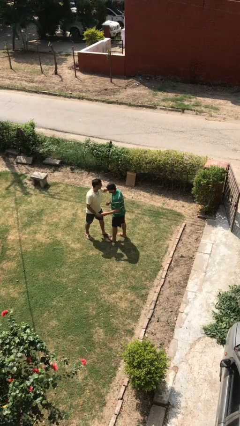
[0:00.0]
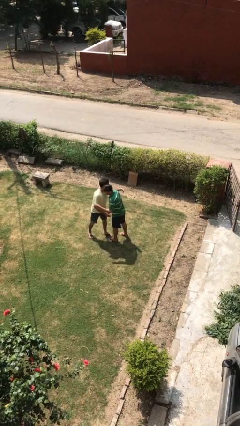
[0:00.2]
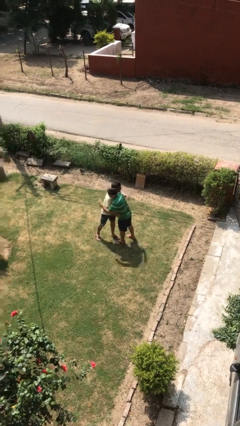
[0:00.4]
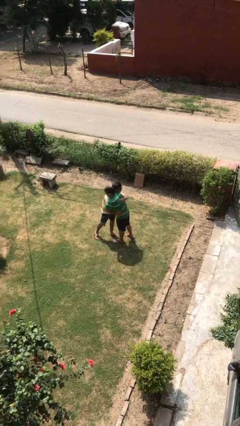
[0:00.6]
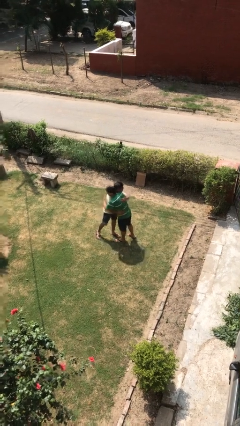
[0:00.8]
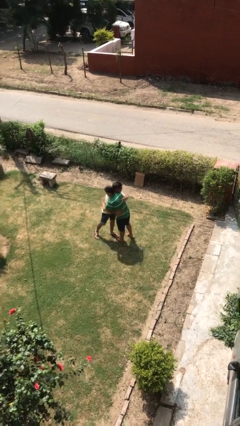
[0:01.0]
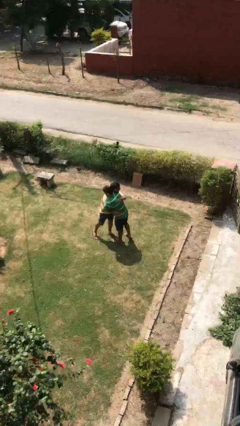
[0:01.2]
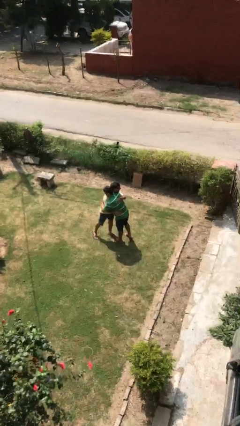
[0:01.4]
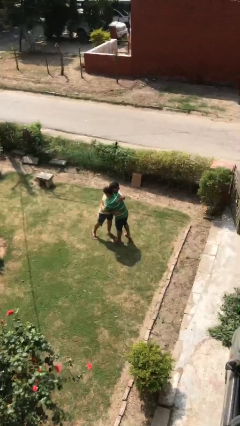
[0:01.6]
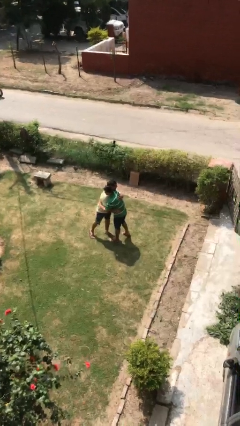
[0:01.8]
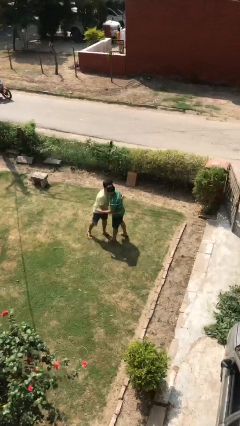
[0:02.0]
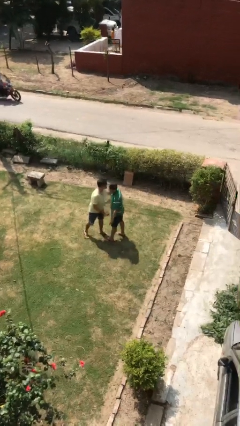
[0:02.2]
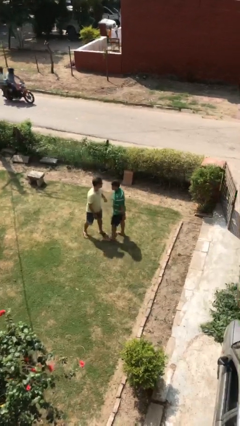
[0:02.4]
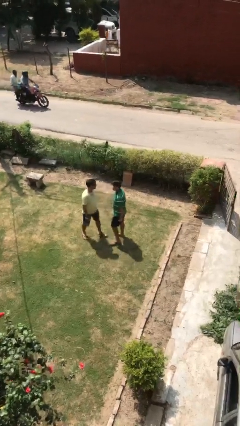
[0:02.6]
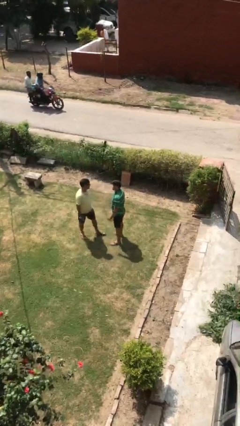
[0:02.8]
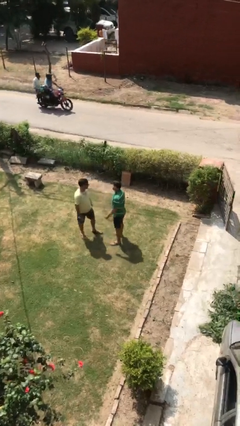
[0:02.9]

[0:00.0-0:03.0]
person embraces person

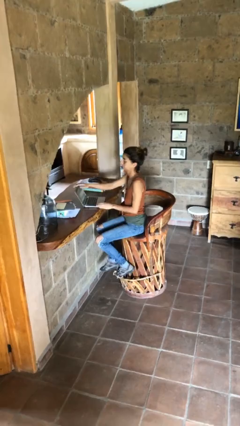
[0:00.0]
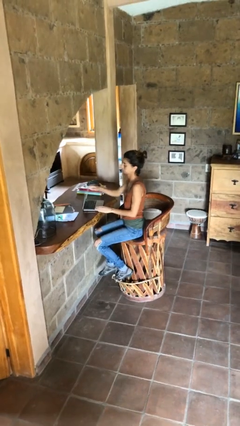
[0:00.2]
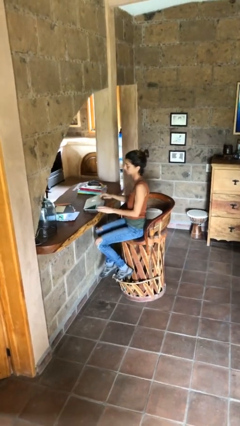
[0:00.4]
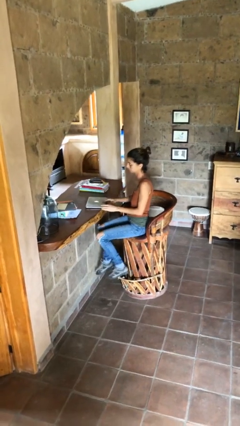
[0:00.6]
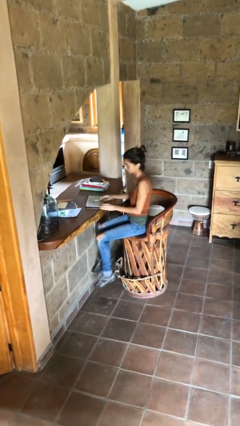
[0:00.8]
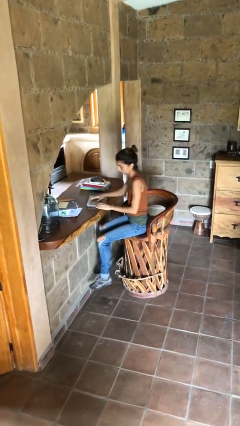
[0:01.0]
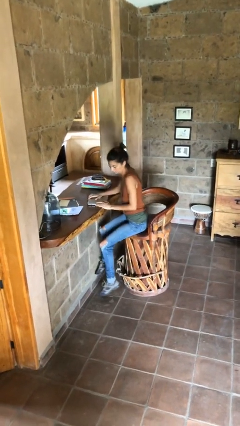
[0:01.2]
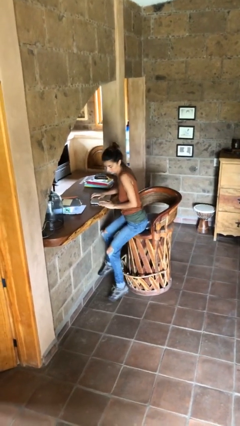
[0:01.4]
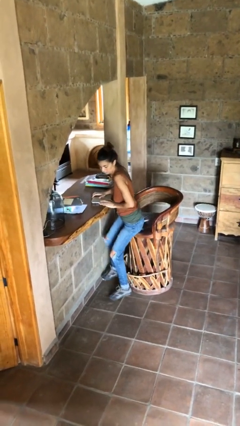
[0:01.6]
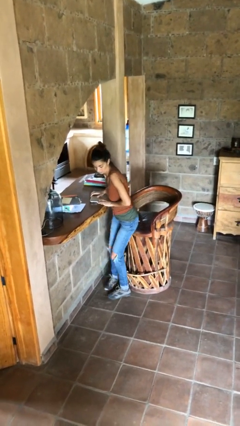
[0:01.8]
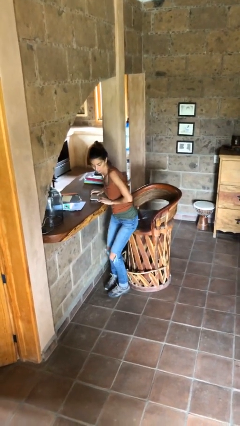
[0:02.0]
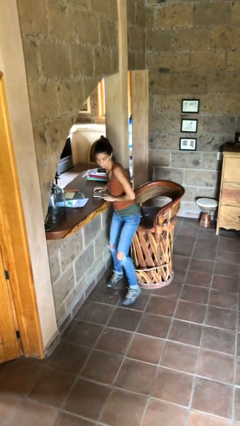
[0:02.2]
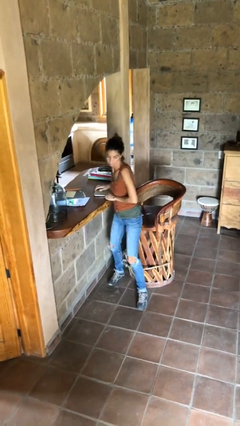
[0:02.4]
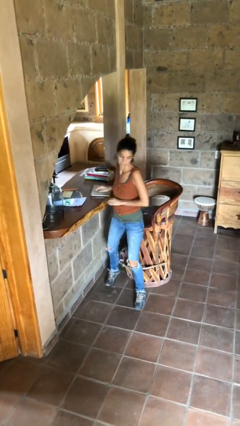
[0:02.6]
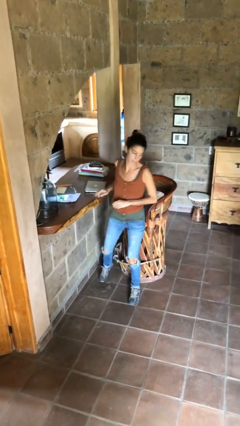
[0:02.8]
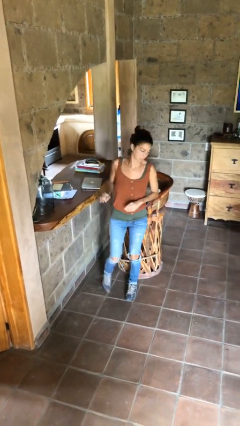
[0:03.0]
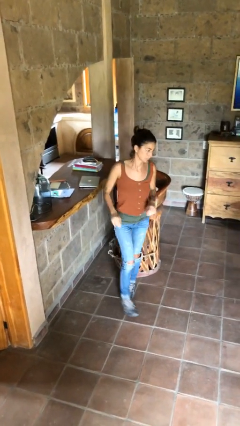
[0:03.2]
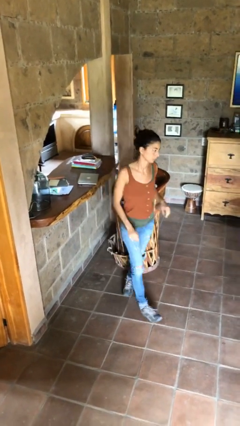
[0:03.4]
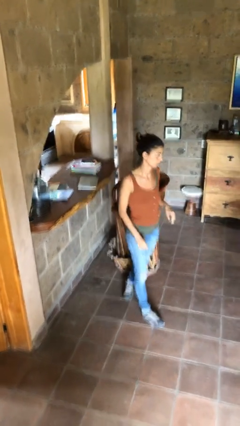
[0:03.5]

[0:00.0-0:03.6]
person stands up

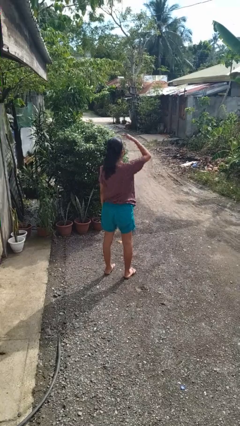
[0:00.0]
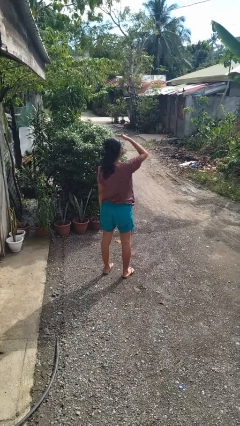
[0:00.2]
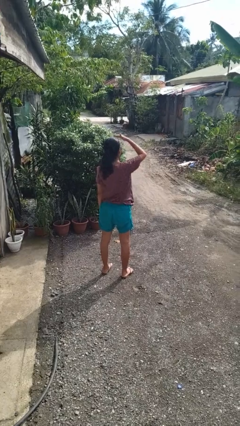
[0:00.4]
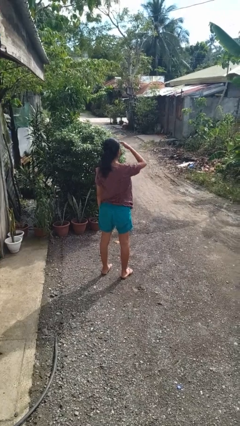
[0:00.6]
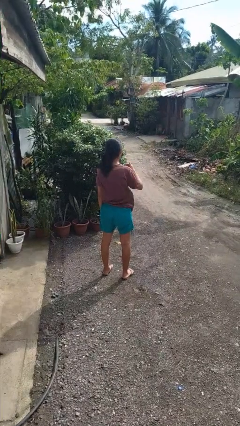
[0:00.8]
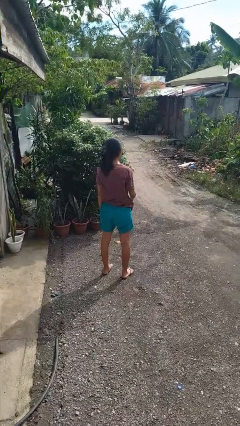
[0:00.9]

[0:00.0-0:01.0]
person shades eyes

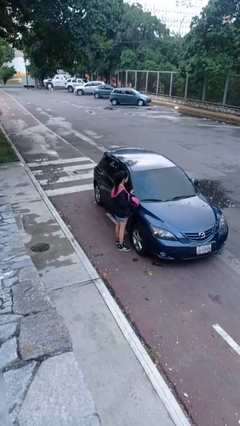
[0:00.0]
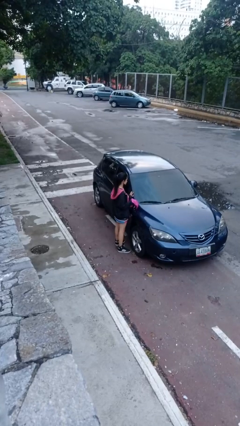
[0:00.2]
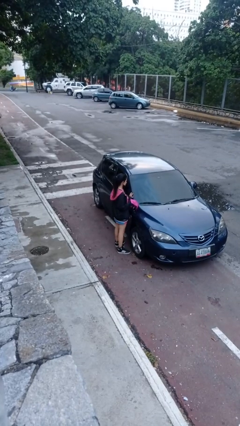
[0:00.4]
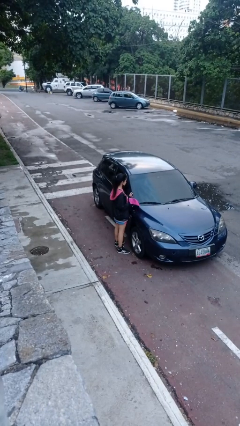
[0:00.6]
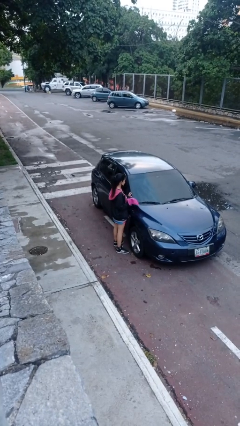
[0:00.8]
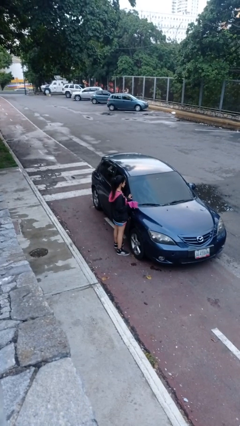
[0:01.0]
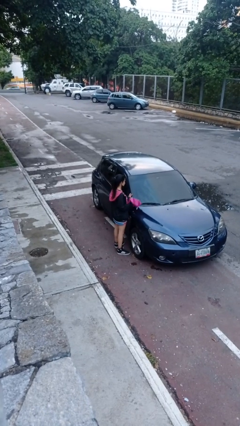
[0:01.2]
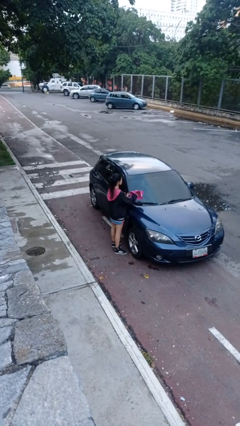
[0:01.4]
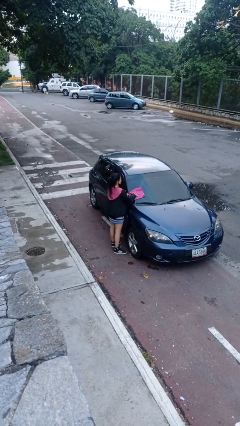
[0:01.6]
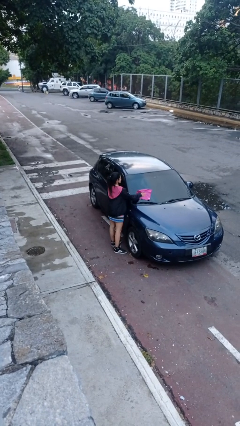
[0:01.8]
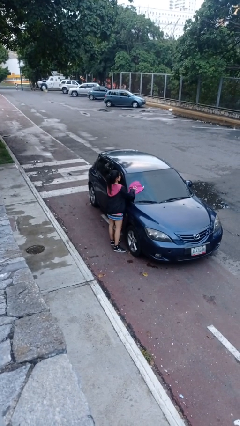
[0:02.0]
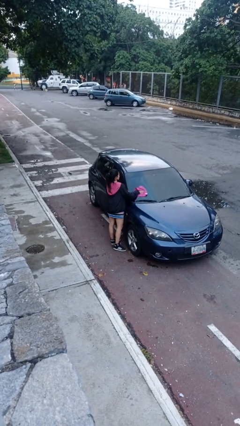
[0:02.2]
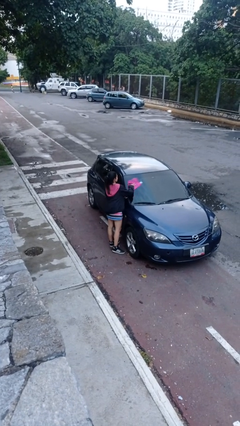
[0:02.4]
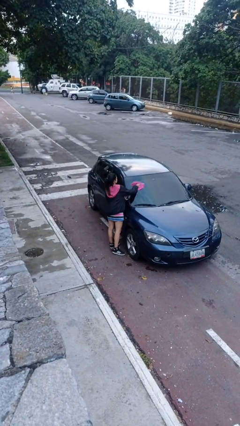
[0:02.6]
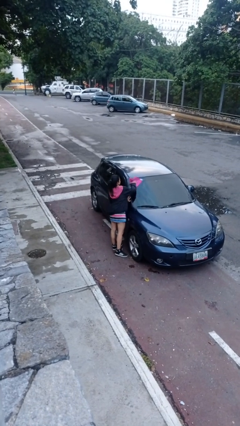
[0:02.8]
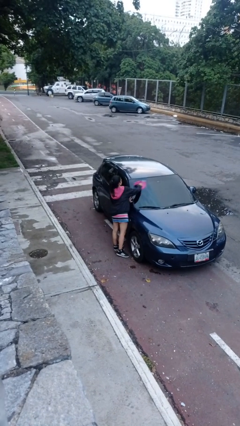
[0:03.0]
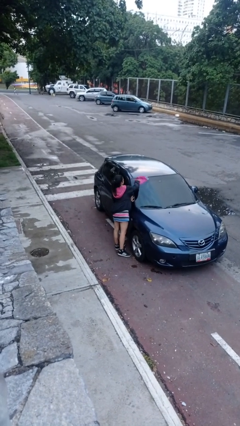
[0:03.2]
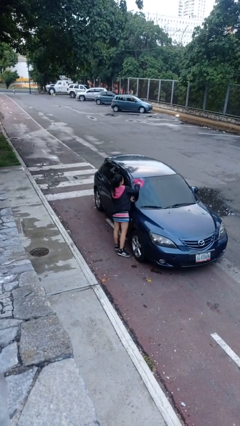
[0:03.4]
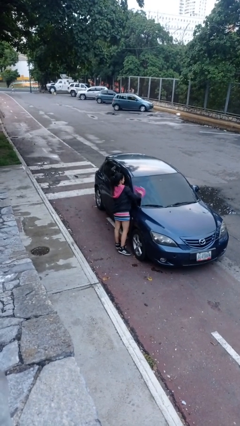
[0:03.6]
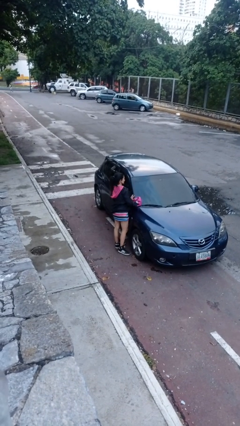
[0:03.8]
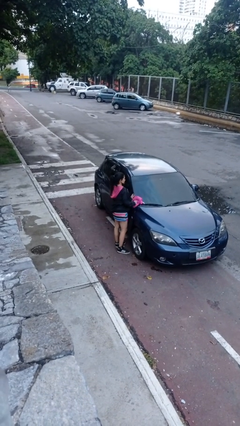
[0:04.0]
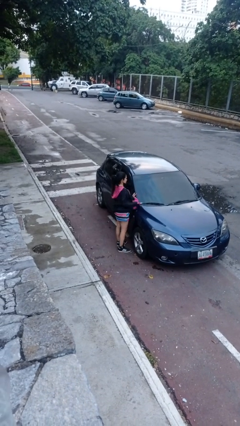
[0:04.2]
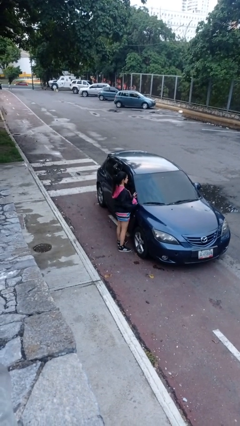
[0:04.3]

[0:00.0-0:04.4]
person polishes car with rag

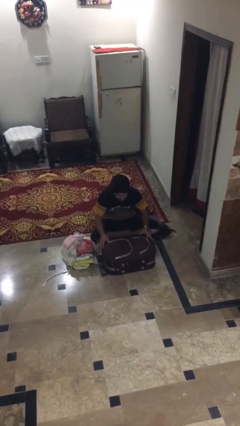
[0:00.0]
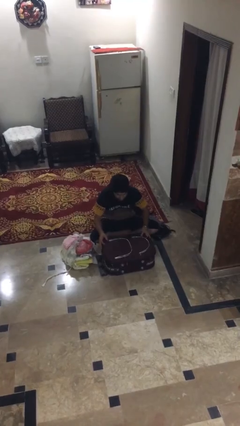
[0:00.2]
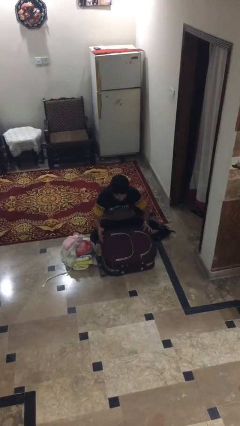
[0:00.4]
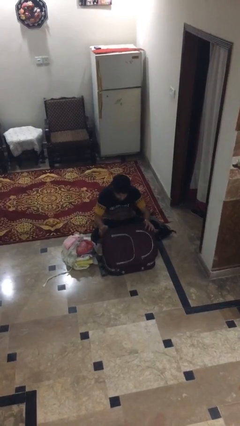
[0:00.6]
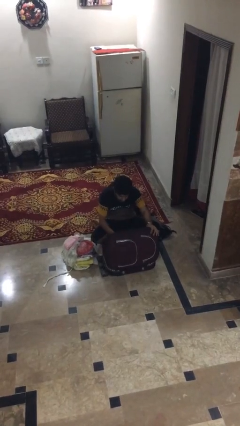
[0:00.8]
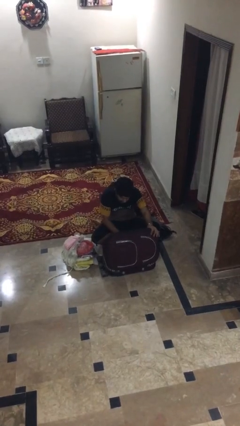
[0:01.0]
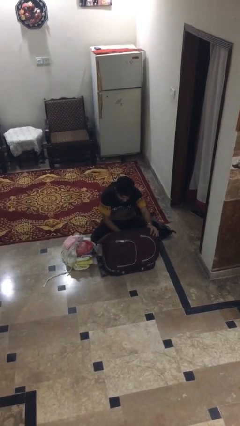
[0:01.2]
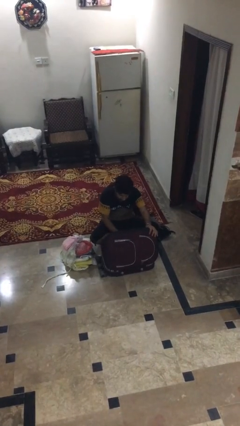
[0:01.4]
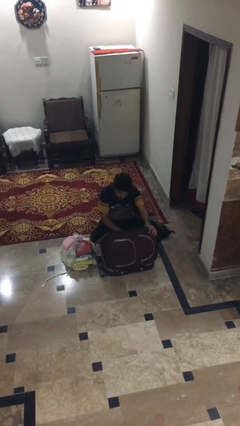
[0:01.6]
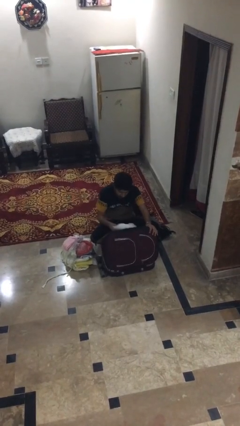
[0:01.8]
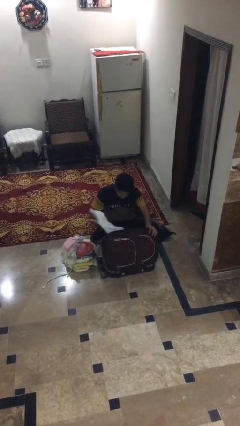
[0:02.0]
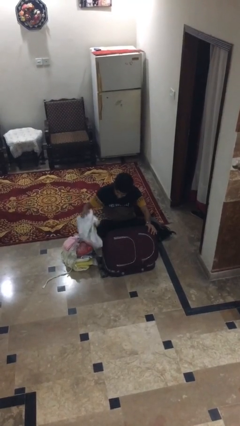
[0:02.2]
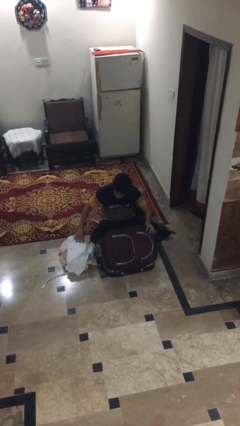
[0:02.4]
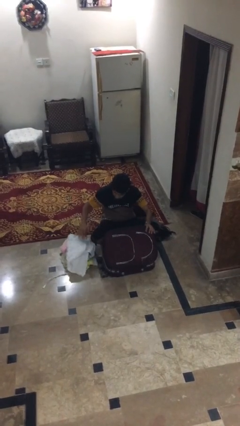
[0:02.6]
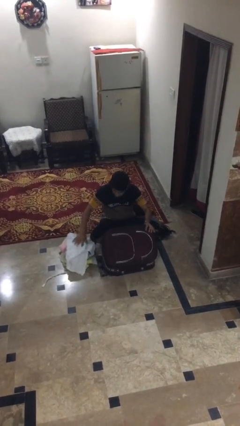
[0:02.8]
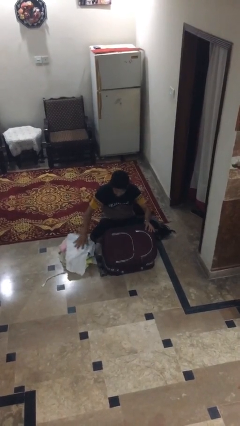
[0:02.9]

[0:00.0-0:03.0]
person unloads clothes from suitcase

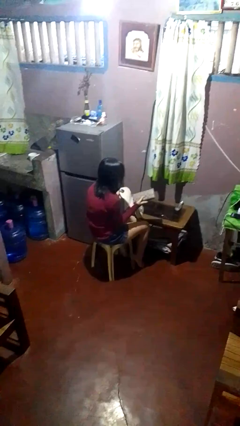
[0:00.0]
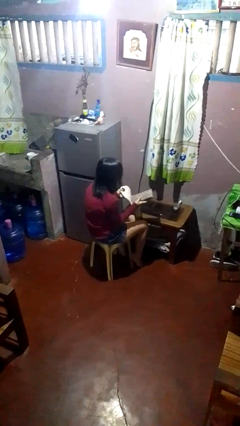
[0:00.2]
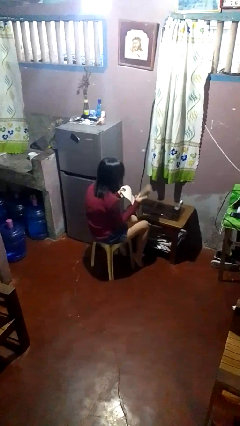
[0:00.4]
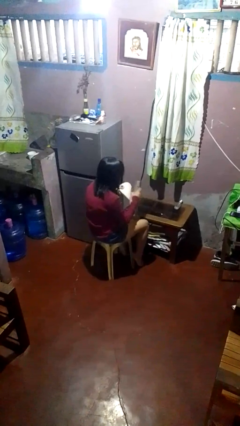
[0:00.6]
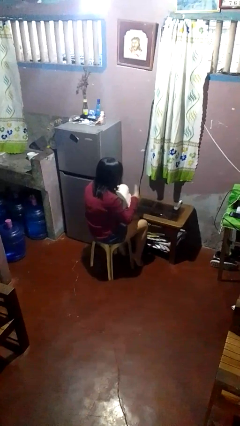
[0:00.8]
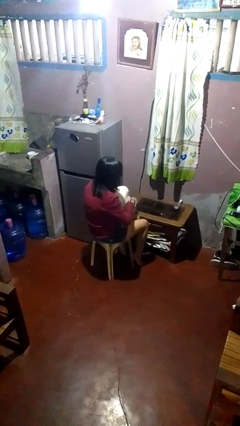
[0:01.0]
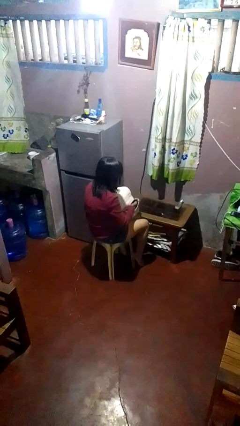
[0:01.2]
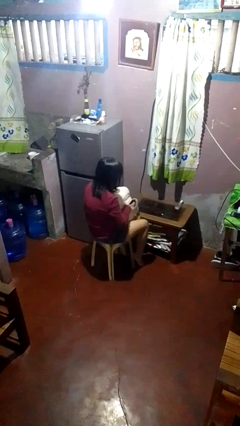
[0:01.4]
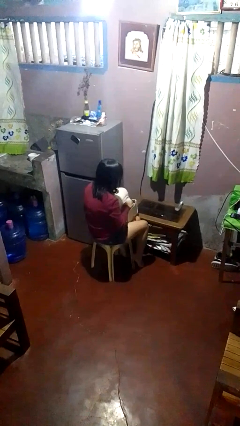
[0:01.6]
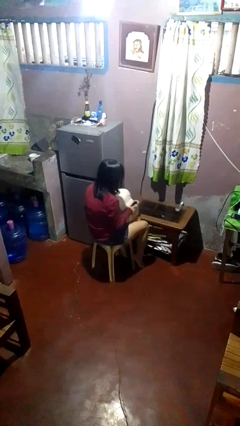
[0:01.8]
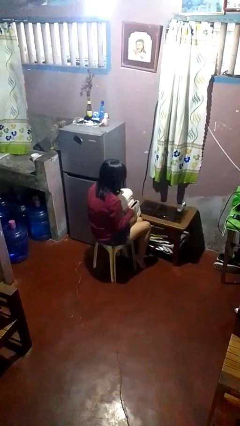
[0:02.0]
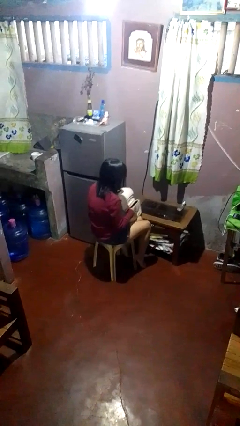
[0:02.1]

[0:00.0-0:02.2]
person puts object into purse

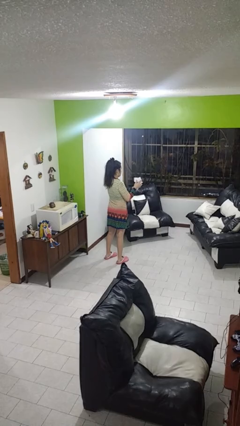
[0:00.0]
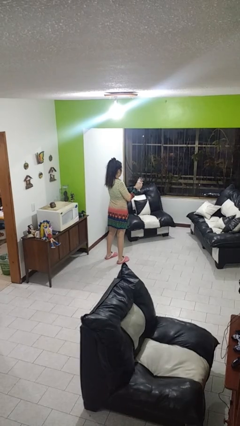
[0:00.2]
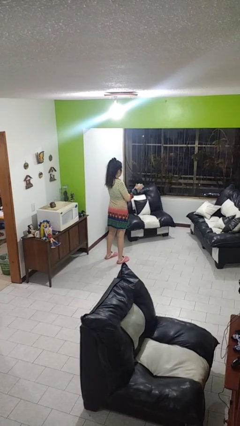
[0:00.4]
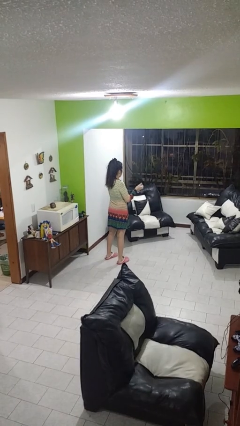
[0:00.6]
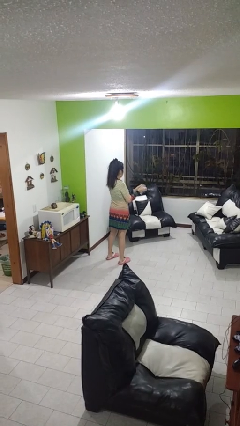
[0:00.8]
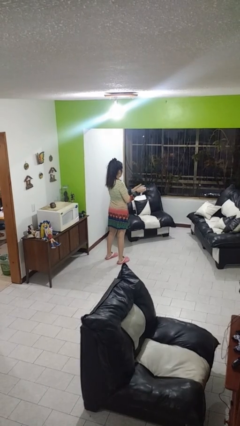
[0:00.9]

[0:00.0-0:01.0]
person crumples paper
